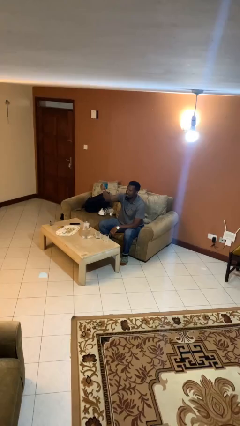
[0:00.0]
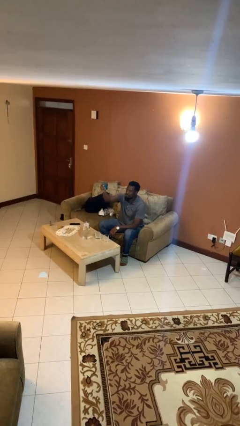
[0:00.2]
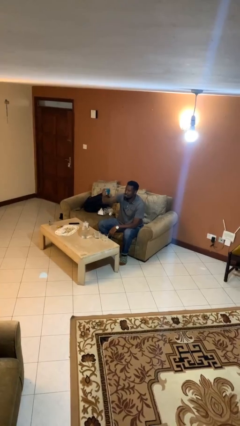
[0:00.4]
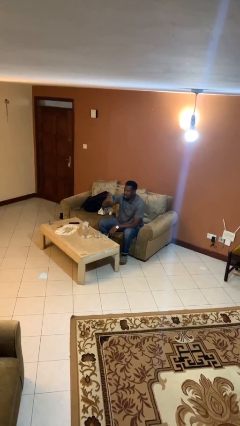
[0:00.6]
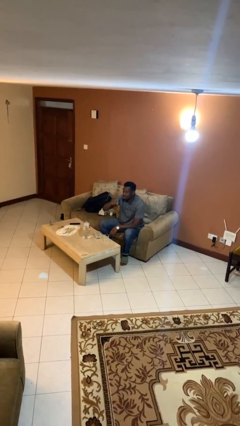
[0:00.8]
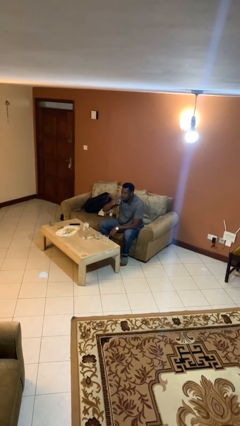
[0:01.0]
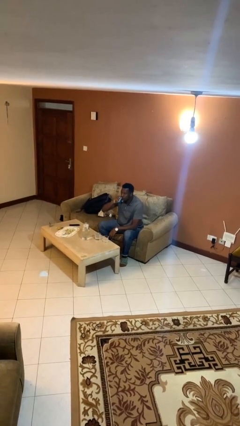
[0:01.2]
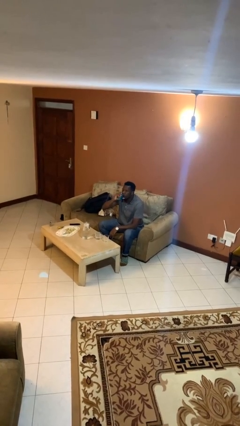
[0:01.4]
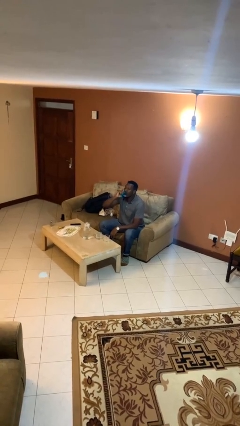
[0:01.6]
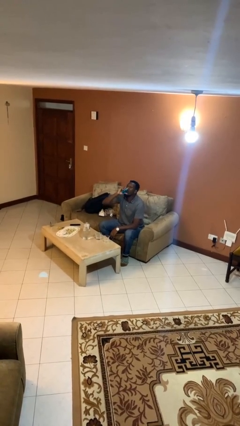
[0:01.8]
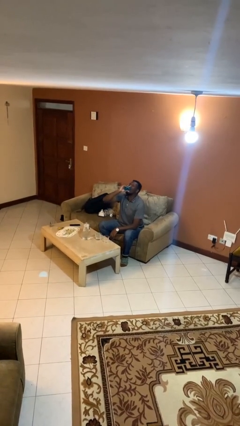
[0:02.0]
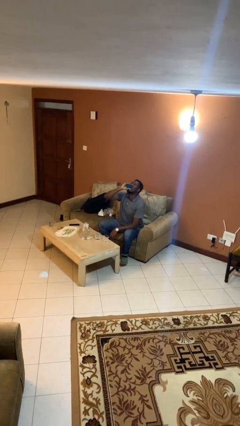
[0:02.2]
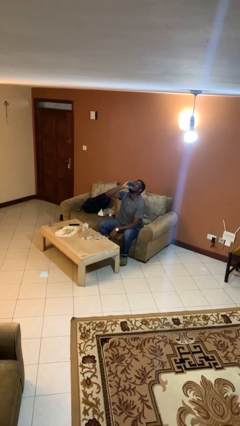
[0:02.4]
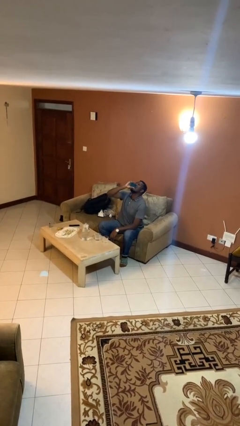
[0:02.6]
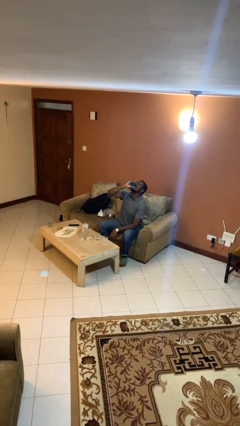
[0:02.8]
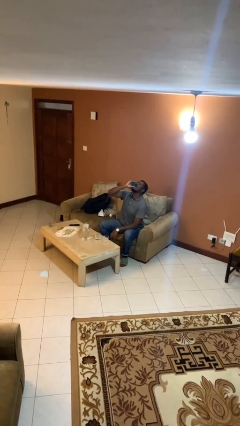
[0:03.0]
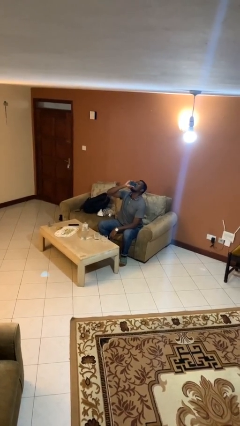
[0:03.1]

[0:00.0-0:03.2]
person drinks from shotglass

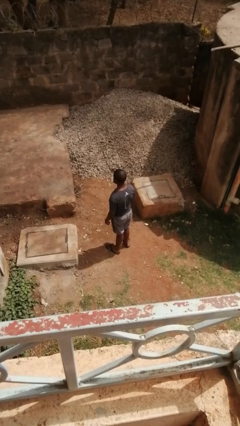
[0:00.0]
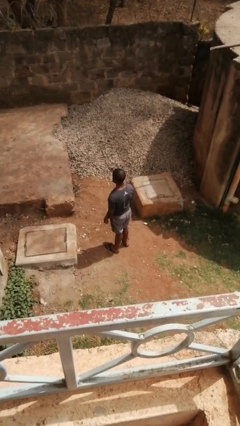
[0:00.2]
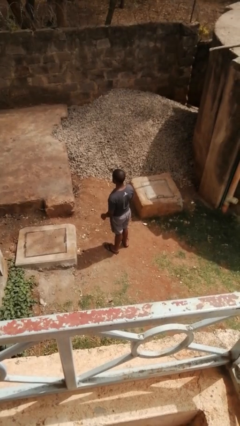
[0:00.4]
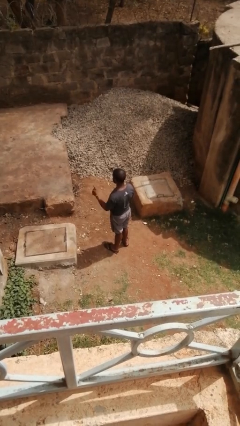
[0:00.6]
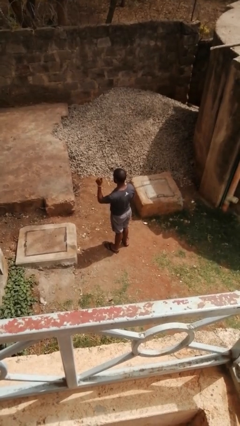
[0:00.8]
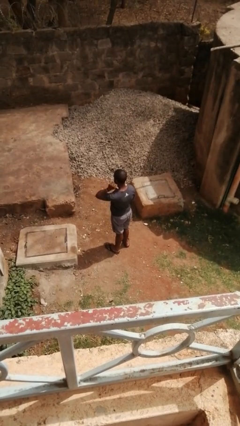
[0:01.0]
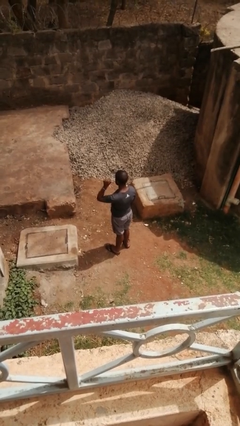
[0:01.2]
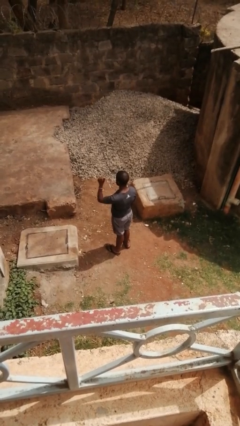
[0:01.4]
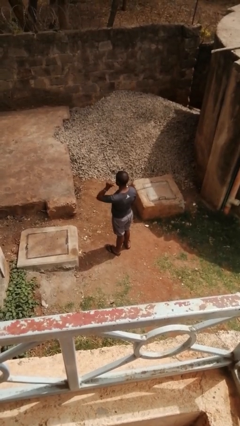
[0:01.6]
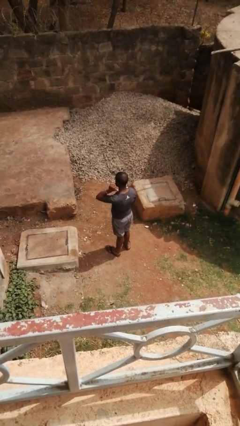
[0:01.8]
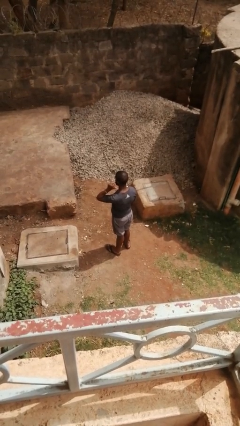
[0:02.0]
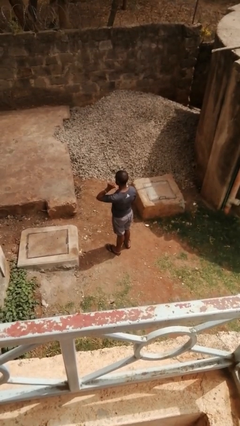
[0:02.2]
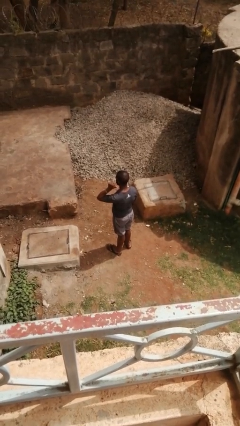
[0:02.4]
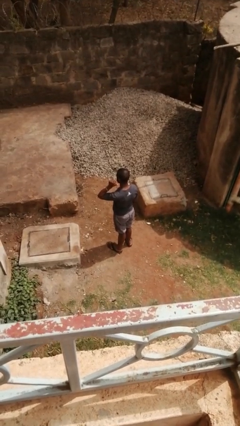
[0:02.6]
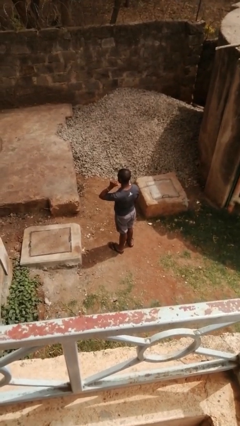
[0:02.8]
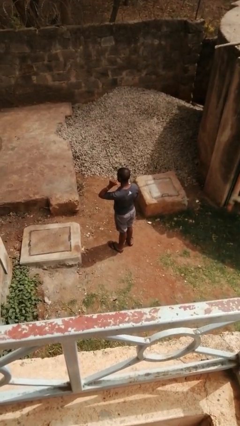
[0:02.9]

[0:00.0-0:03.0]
person gestures behind me

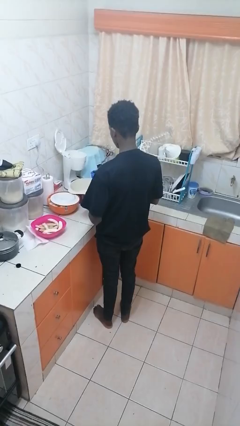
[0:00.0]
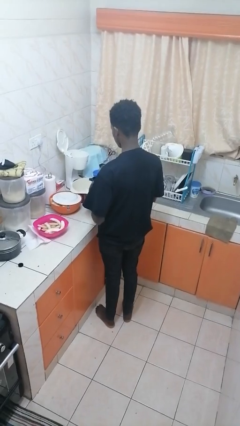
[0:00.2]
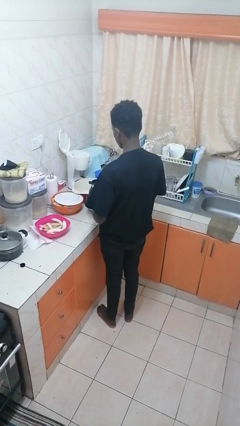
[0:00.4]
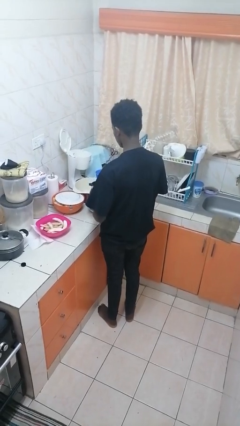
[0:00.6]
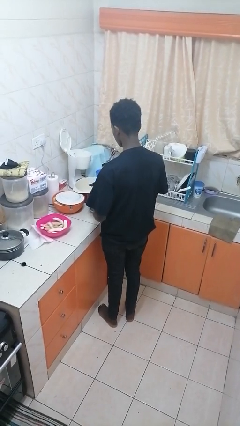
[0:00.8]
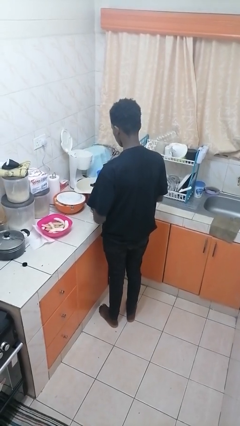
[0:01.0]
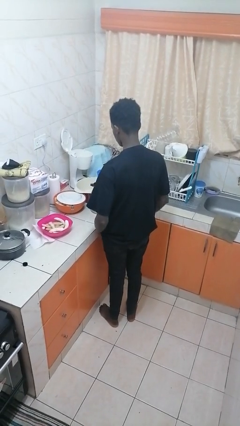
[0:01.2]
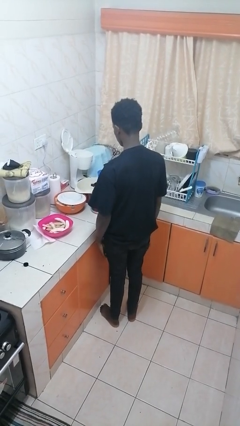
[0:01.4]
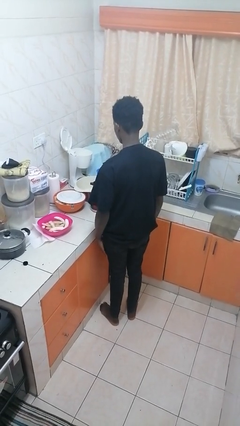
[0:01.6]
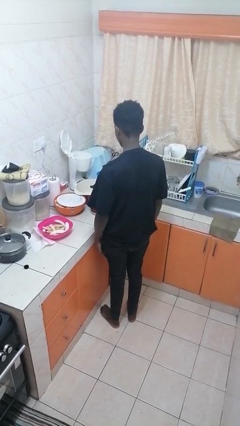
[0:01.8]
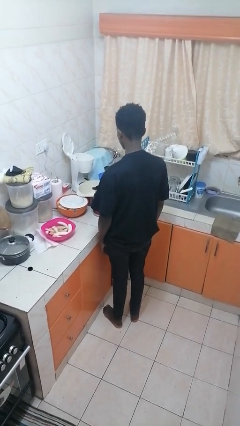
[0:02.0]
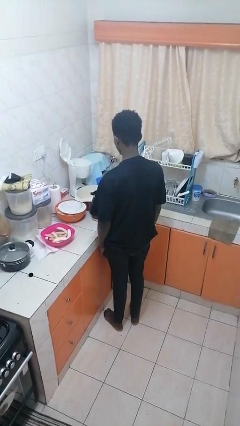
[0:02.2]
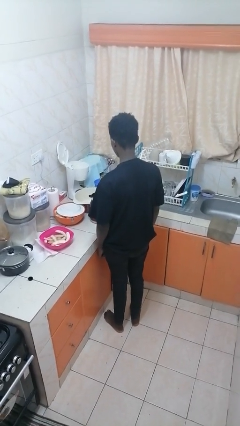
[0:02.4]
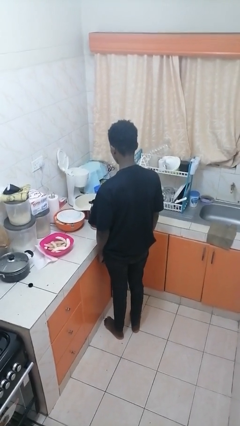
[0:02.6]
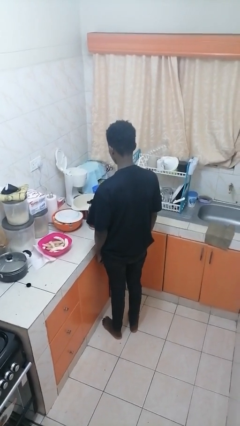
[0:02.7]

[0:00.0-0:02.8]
person puts down object on countertop

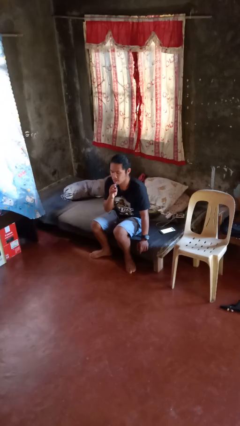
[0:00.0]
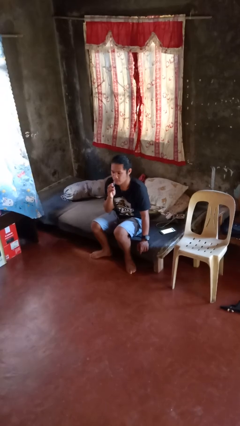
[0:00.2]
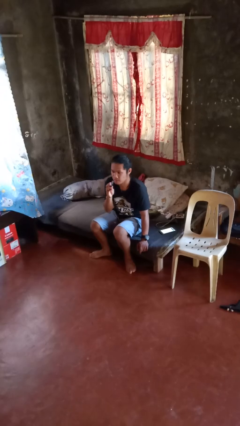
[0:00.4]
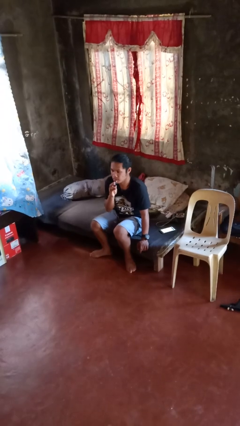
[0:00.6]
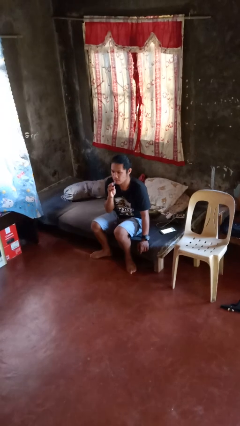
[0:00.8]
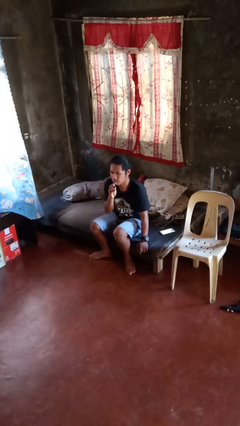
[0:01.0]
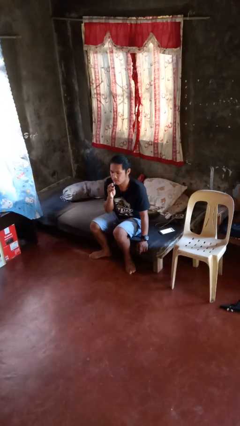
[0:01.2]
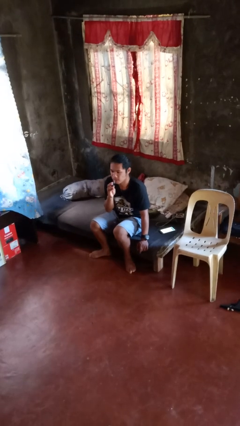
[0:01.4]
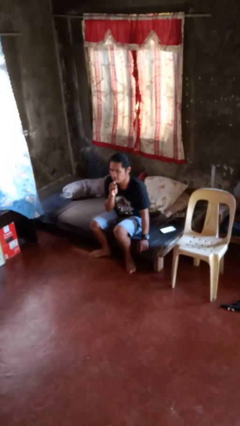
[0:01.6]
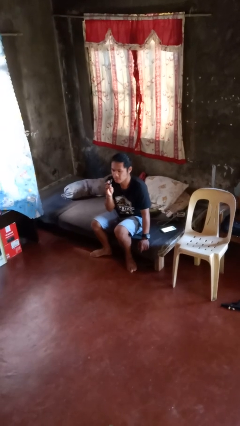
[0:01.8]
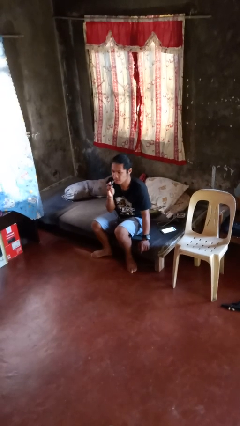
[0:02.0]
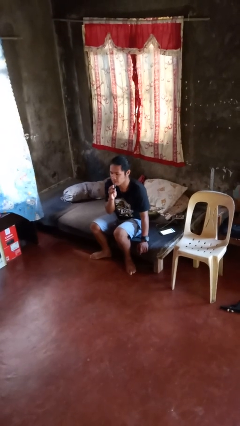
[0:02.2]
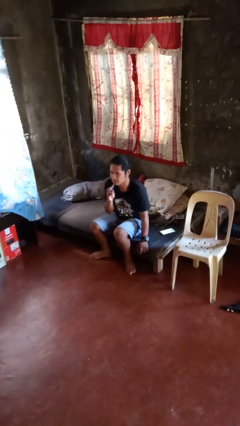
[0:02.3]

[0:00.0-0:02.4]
person applies lip makeup

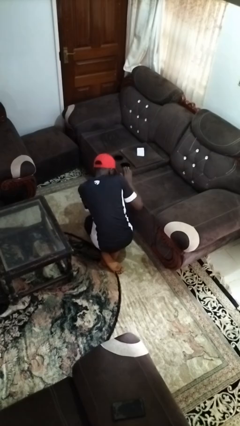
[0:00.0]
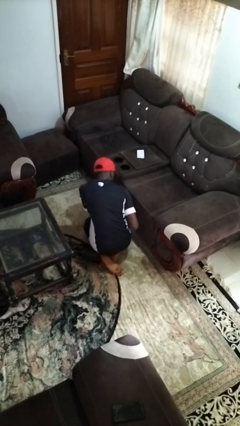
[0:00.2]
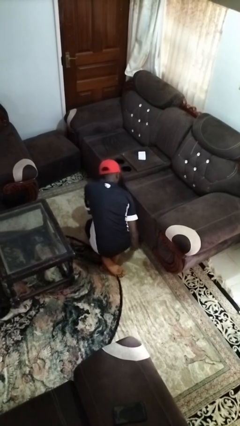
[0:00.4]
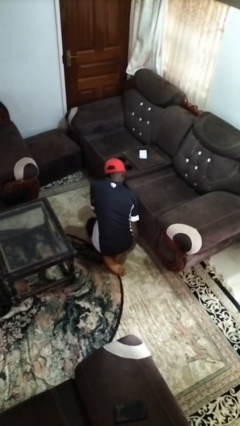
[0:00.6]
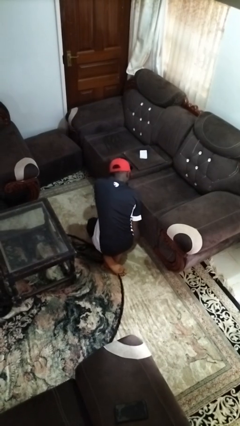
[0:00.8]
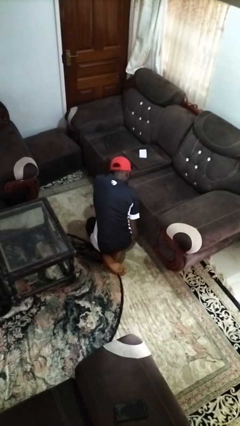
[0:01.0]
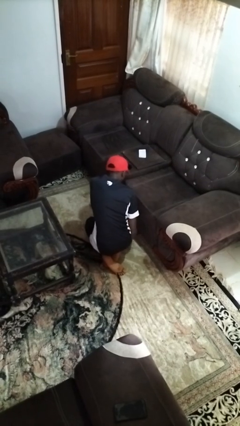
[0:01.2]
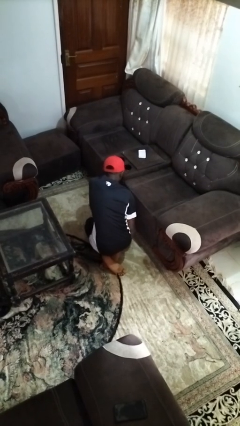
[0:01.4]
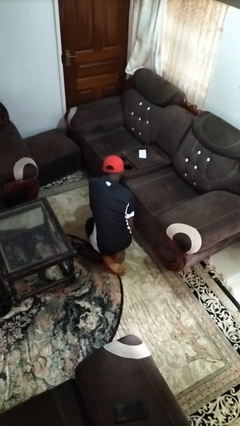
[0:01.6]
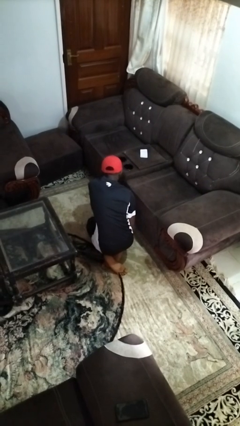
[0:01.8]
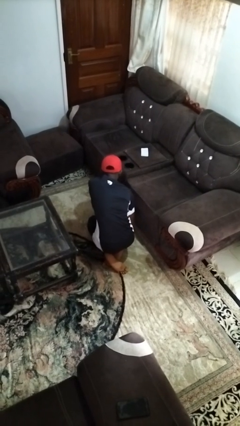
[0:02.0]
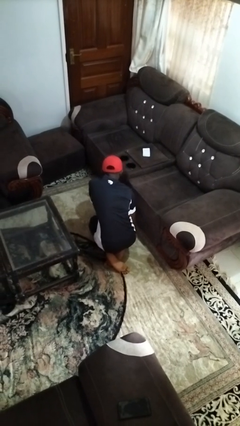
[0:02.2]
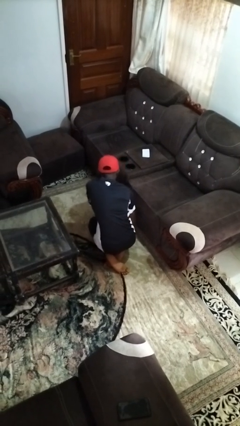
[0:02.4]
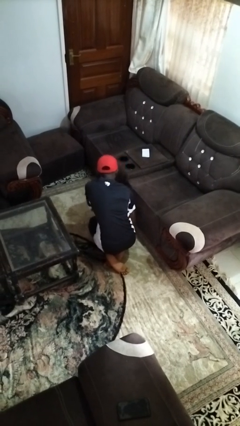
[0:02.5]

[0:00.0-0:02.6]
person searches under couch

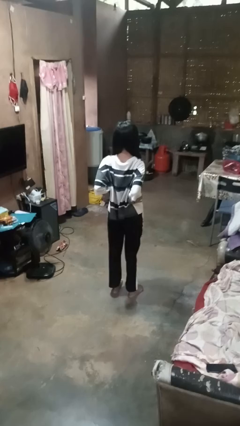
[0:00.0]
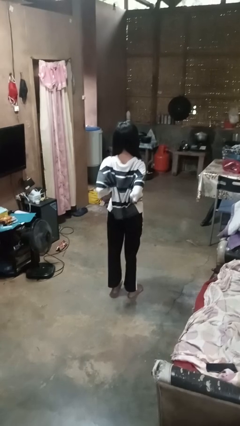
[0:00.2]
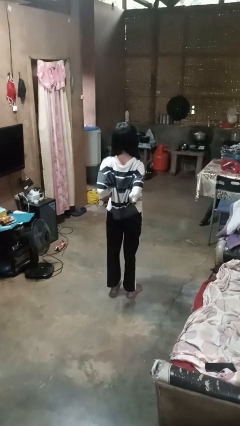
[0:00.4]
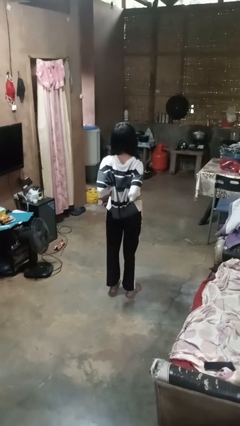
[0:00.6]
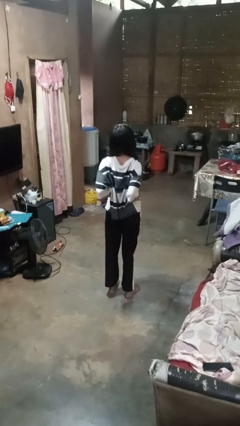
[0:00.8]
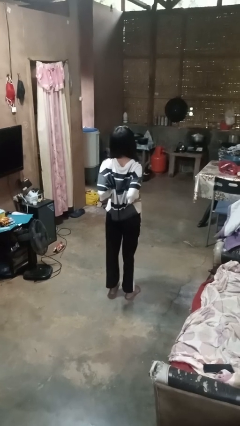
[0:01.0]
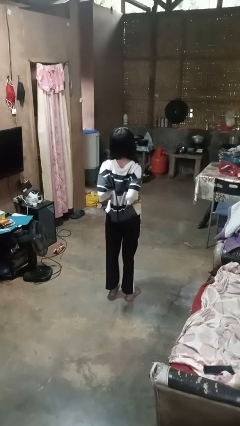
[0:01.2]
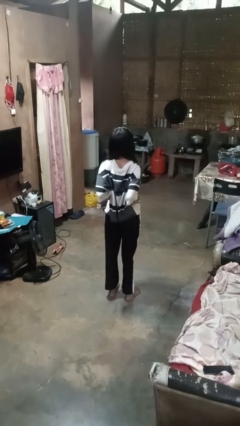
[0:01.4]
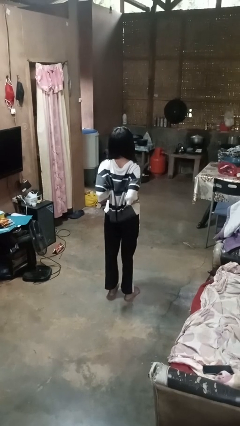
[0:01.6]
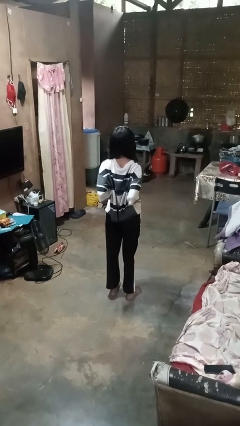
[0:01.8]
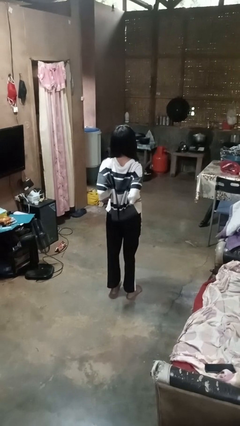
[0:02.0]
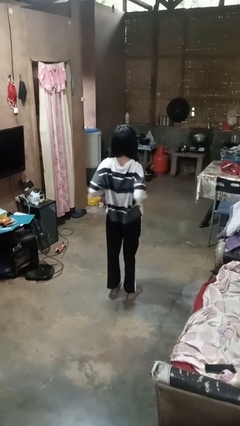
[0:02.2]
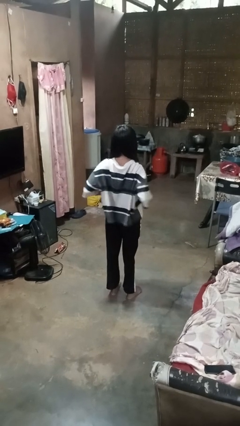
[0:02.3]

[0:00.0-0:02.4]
person stretches back

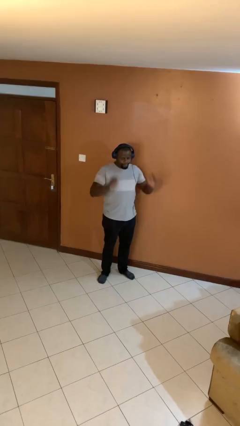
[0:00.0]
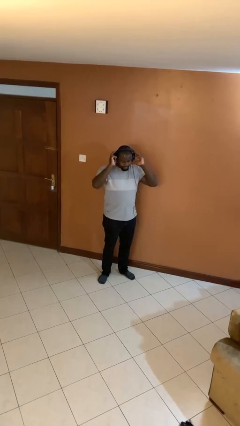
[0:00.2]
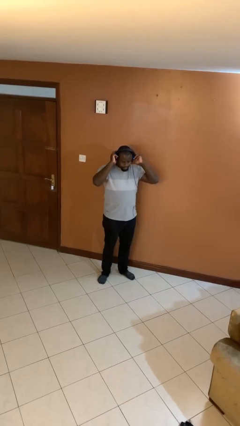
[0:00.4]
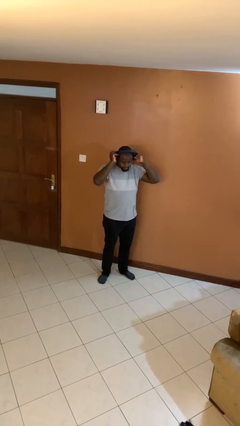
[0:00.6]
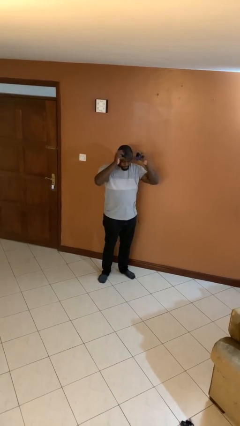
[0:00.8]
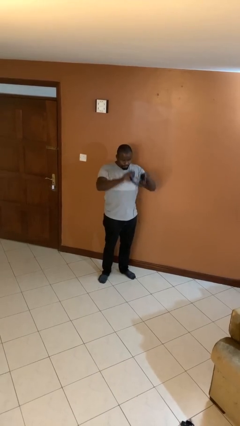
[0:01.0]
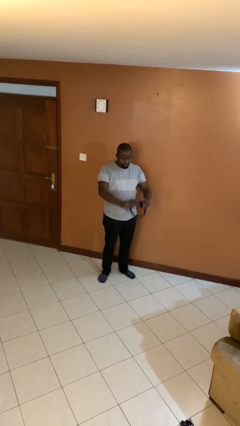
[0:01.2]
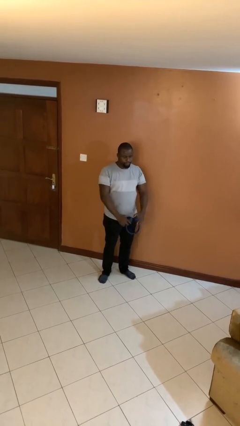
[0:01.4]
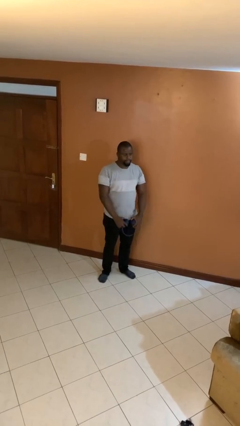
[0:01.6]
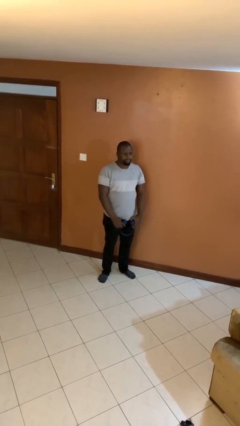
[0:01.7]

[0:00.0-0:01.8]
person takes off headphones
